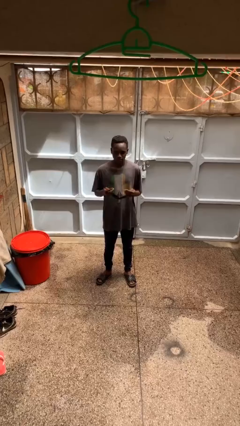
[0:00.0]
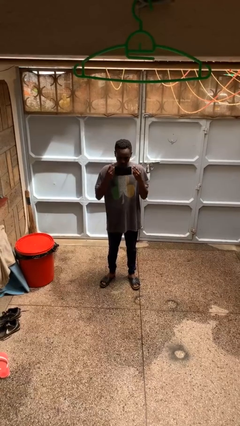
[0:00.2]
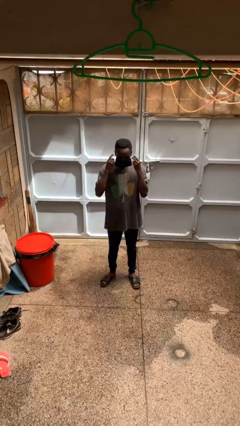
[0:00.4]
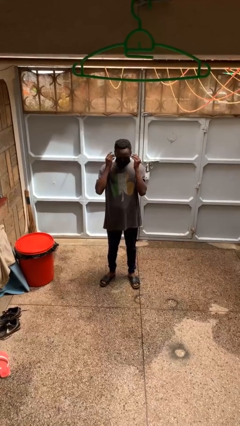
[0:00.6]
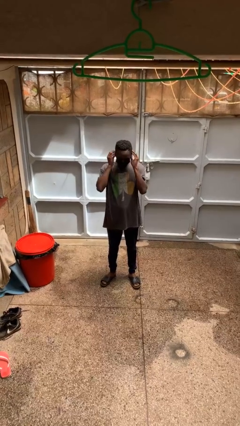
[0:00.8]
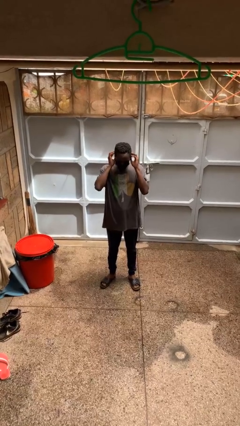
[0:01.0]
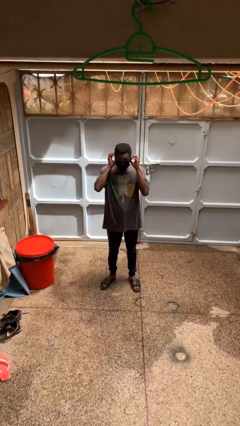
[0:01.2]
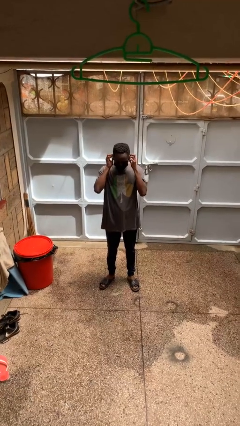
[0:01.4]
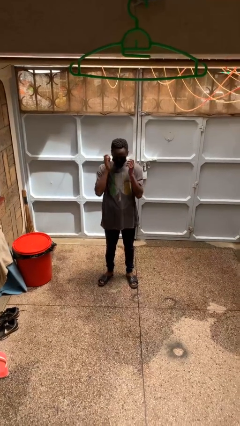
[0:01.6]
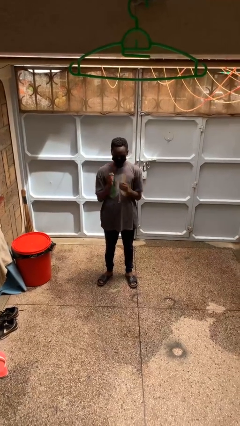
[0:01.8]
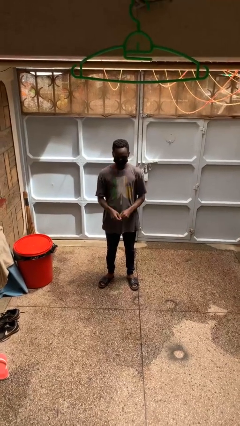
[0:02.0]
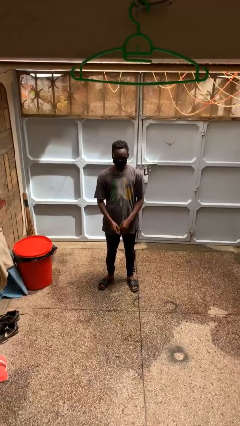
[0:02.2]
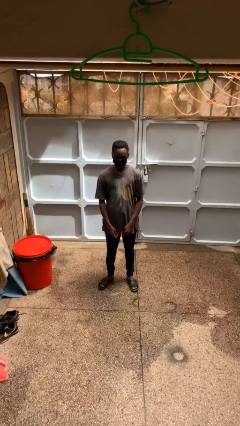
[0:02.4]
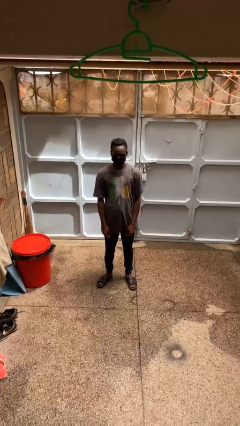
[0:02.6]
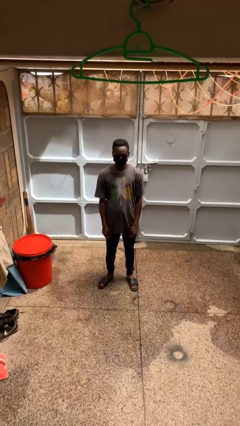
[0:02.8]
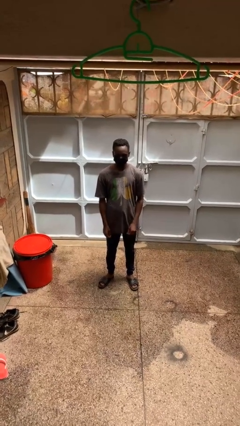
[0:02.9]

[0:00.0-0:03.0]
person puts on facemask

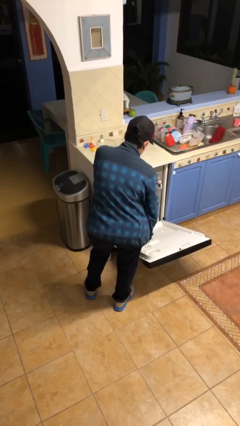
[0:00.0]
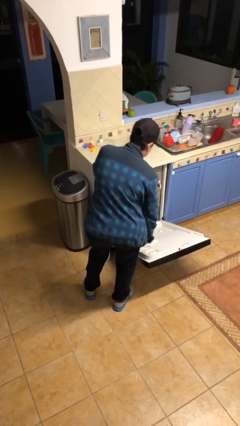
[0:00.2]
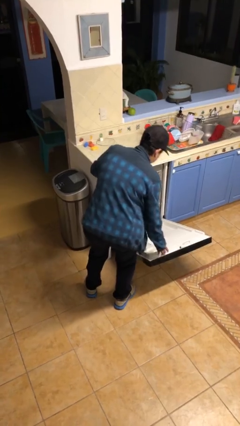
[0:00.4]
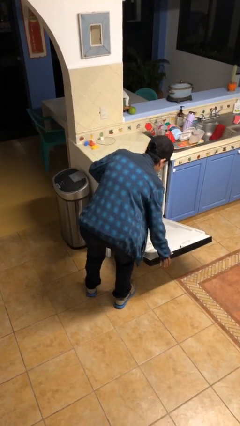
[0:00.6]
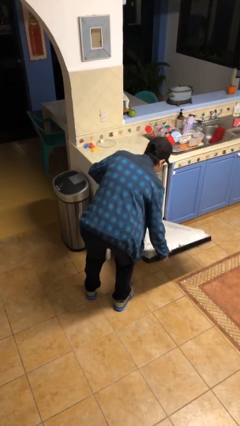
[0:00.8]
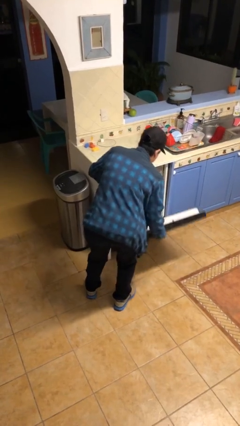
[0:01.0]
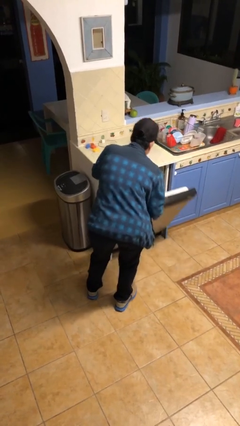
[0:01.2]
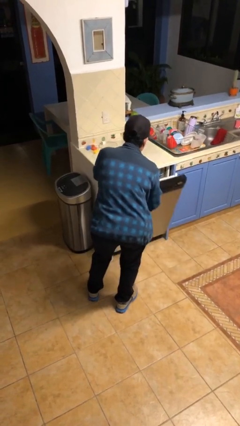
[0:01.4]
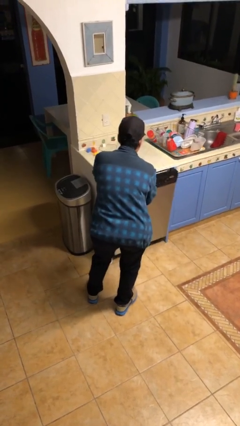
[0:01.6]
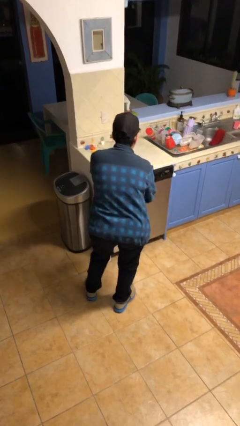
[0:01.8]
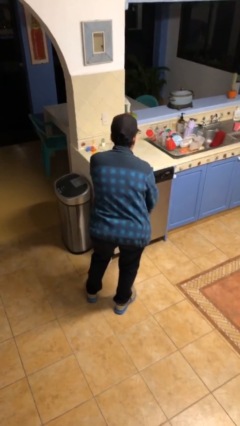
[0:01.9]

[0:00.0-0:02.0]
person closes dishwasher

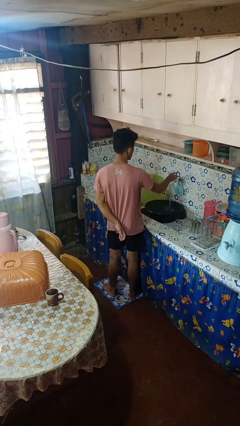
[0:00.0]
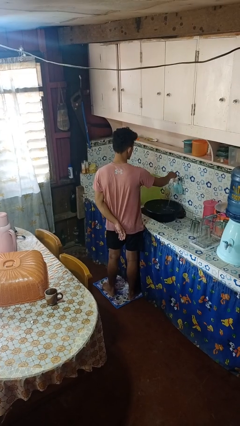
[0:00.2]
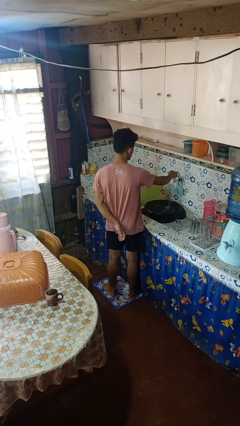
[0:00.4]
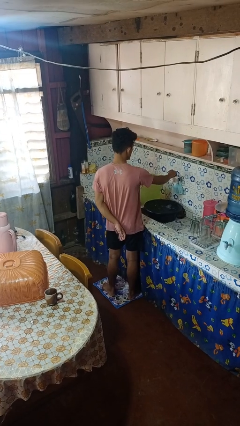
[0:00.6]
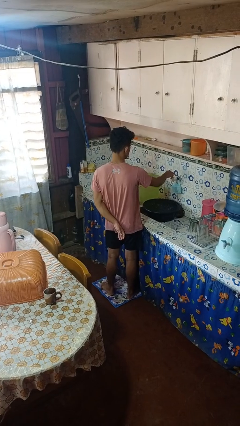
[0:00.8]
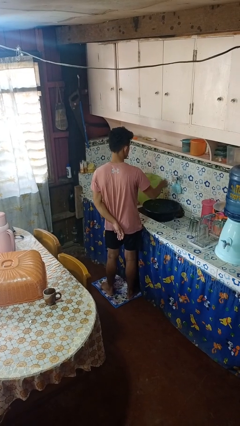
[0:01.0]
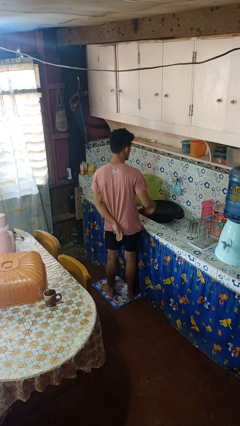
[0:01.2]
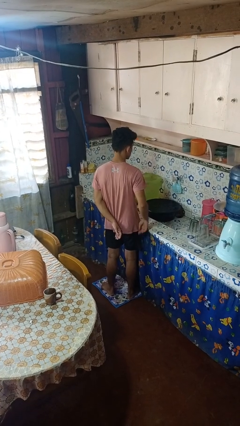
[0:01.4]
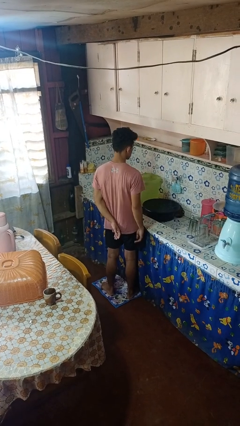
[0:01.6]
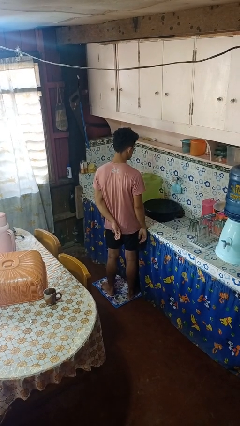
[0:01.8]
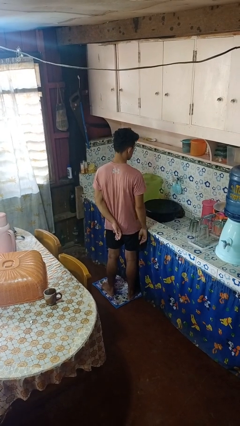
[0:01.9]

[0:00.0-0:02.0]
person turns off faucet

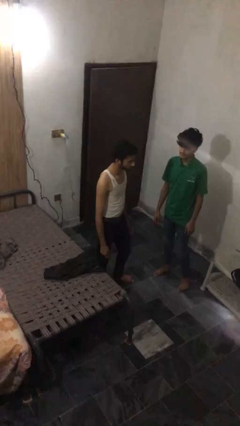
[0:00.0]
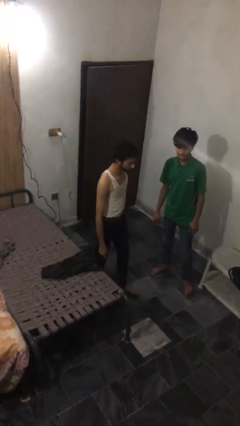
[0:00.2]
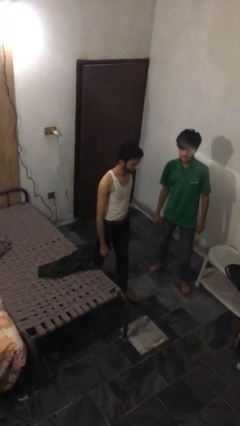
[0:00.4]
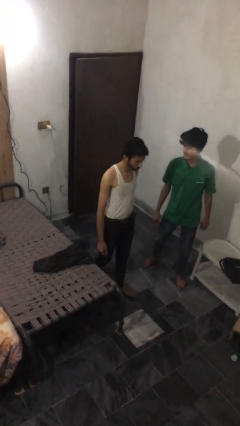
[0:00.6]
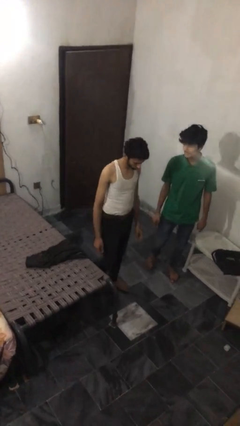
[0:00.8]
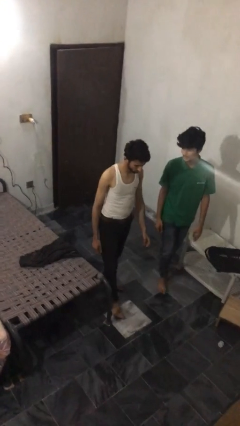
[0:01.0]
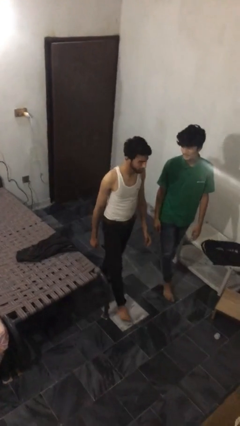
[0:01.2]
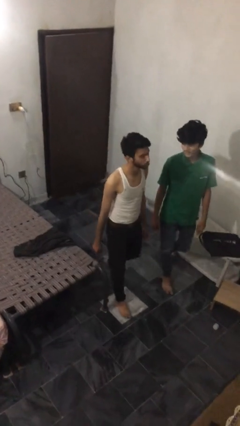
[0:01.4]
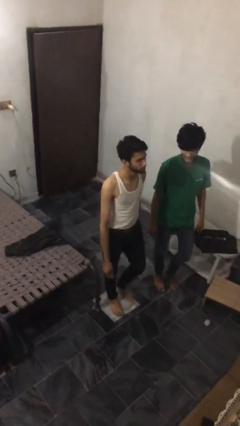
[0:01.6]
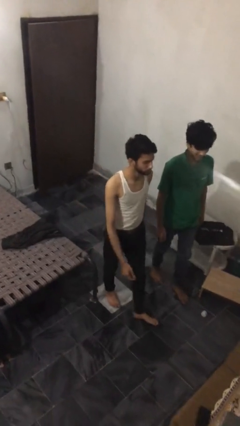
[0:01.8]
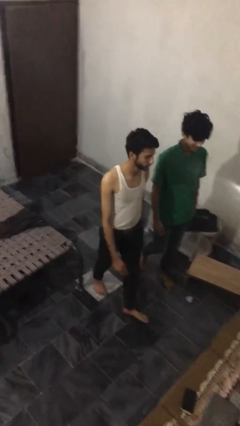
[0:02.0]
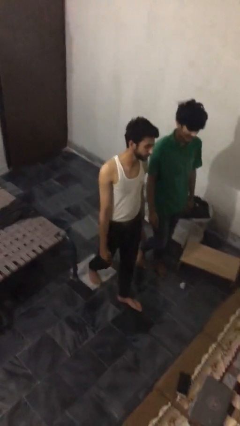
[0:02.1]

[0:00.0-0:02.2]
person talks to person

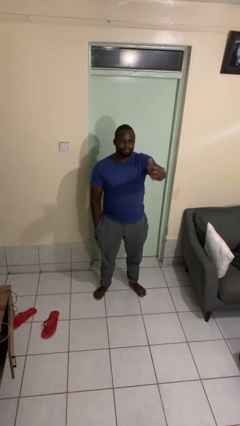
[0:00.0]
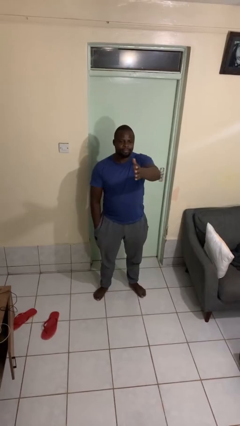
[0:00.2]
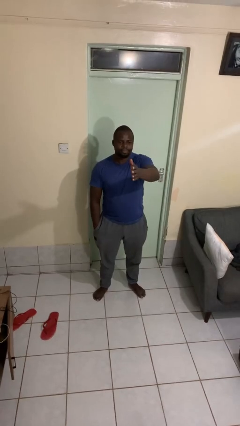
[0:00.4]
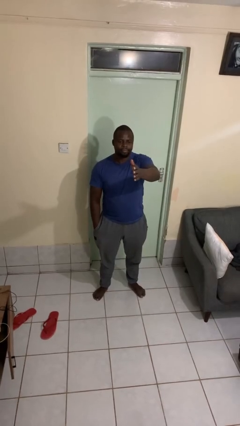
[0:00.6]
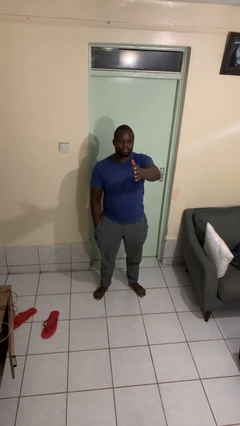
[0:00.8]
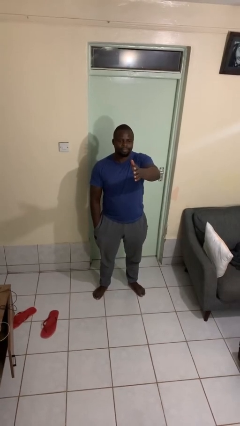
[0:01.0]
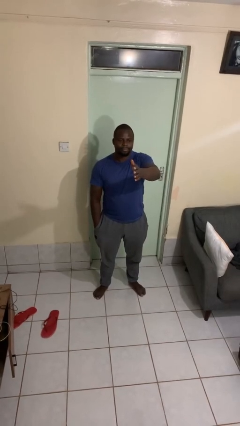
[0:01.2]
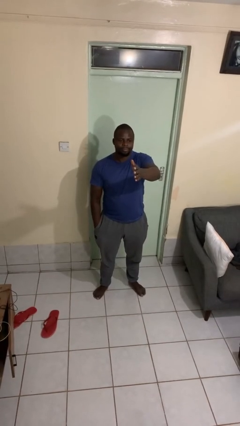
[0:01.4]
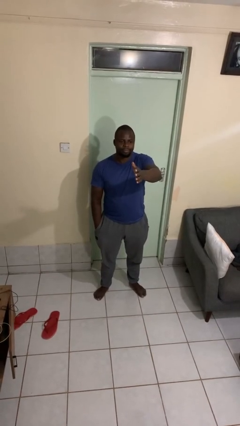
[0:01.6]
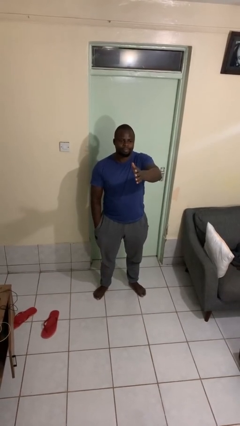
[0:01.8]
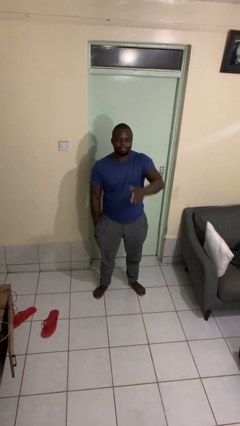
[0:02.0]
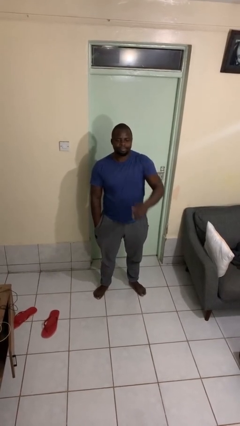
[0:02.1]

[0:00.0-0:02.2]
person gestures swipe right

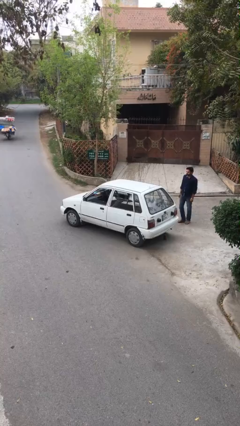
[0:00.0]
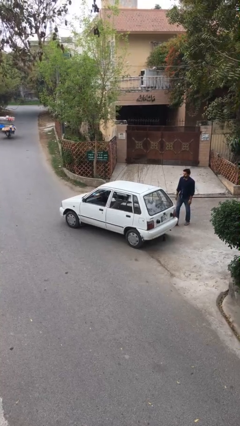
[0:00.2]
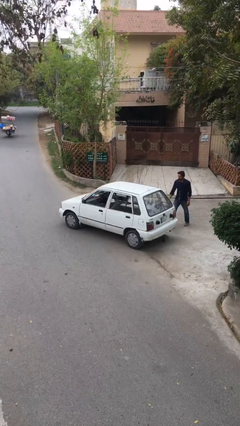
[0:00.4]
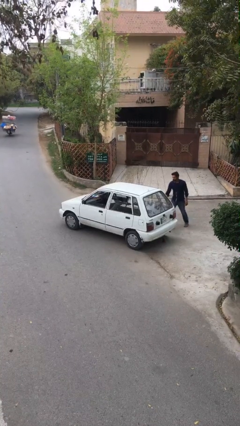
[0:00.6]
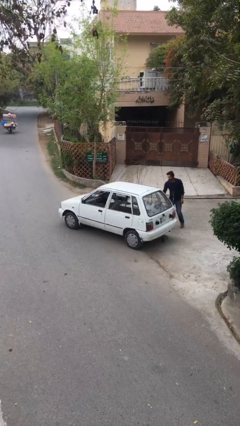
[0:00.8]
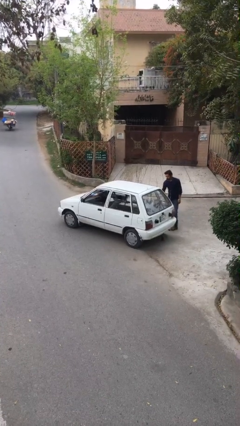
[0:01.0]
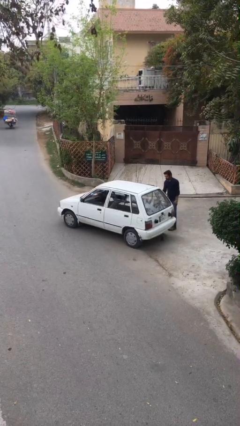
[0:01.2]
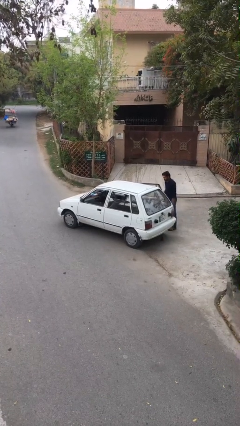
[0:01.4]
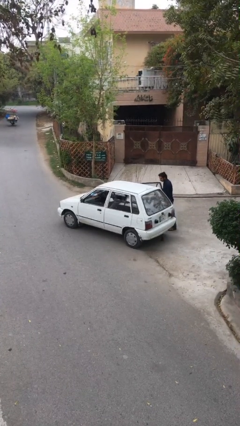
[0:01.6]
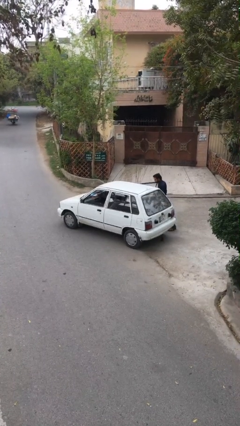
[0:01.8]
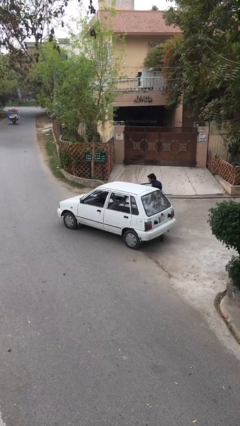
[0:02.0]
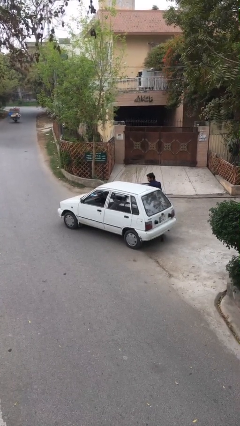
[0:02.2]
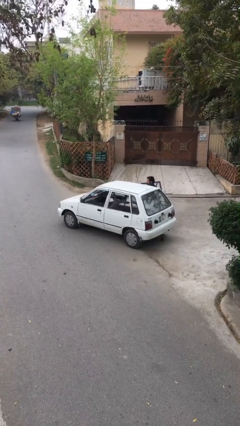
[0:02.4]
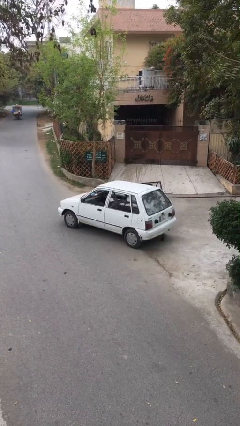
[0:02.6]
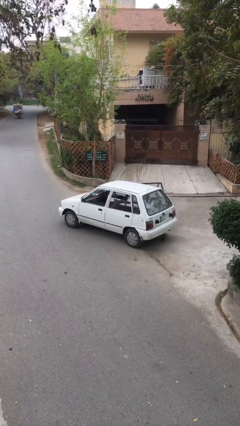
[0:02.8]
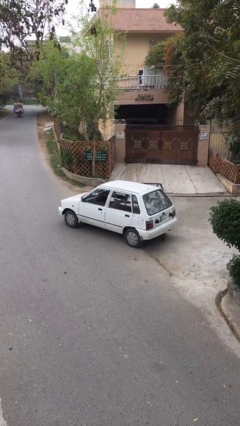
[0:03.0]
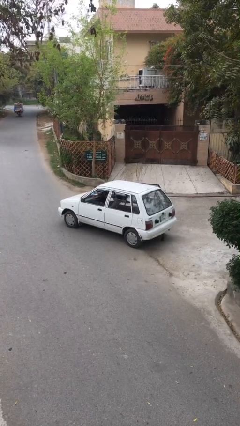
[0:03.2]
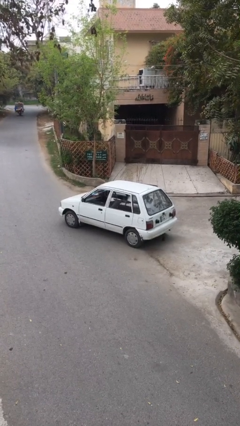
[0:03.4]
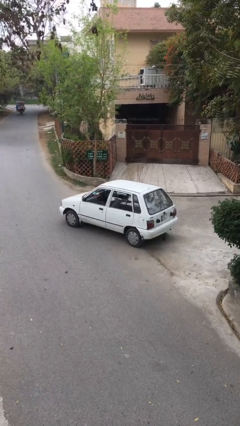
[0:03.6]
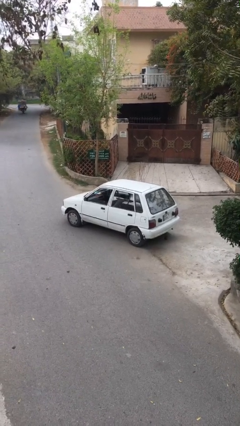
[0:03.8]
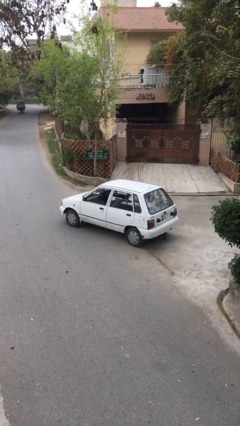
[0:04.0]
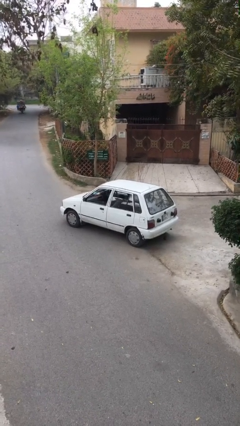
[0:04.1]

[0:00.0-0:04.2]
car picks up person

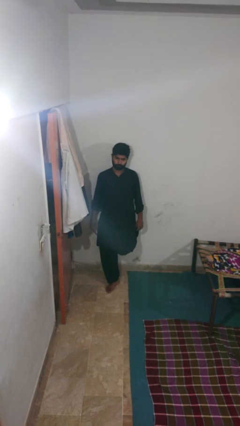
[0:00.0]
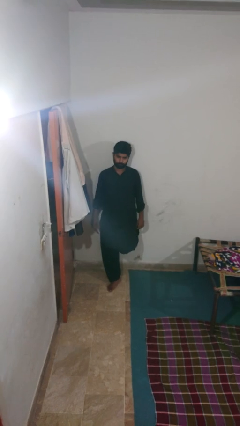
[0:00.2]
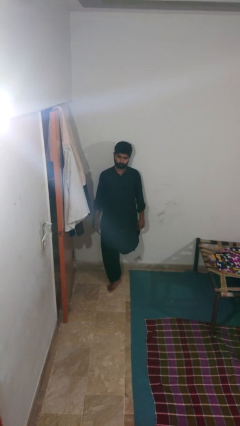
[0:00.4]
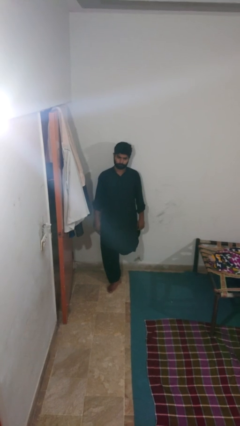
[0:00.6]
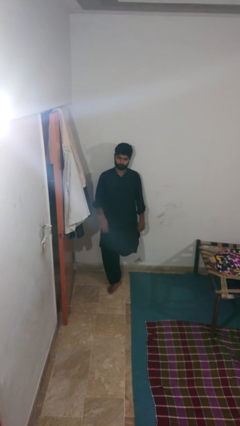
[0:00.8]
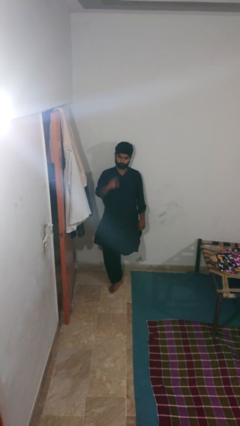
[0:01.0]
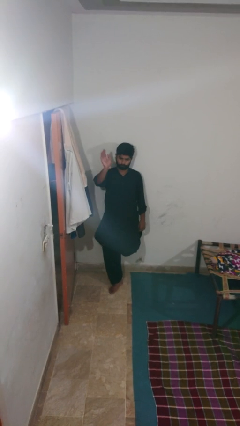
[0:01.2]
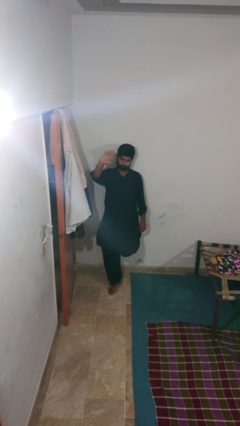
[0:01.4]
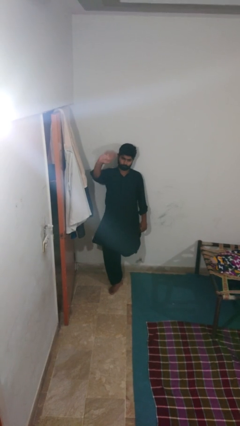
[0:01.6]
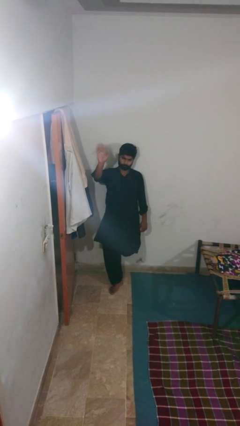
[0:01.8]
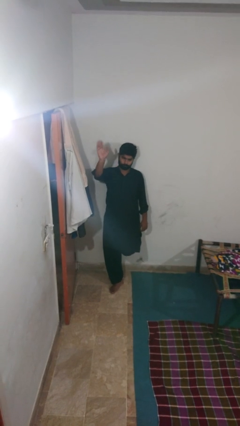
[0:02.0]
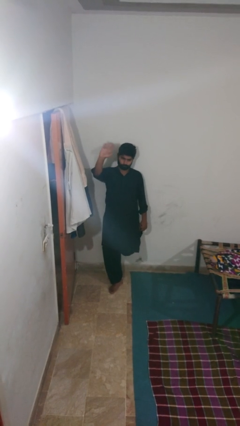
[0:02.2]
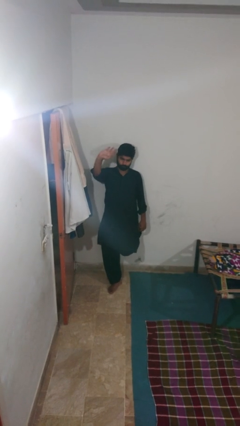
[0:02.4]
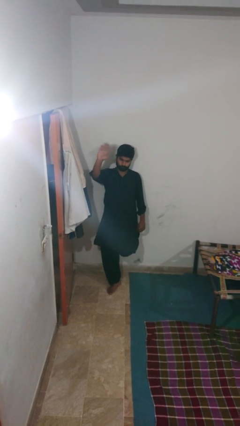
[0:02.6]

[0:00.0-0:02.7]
person waves at person
